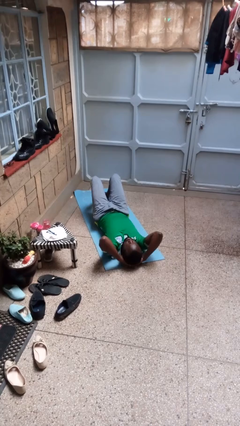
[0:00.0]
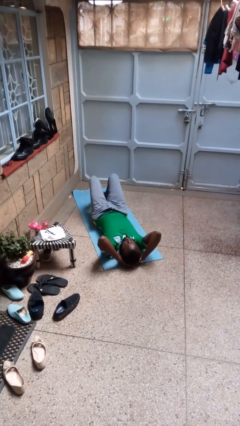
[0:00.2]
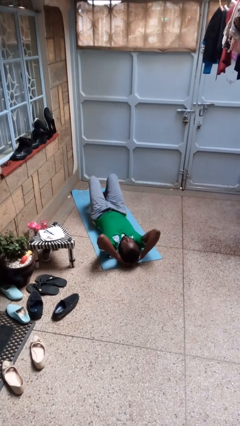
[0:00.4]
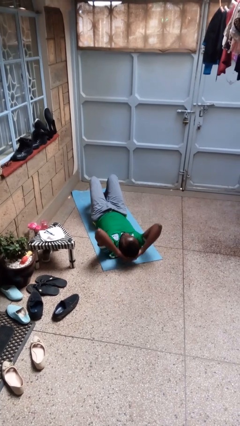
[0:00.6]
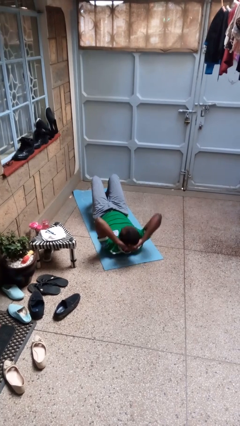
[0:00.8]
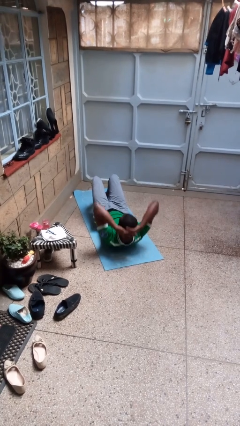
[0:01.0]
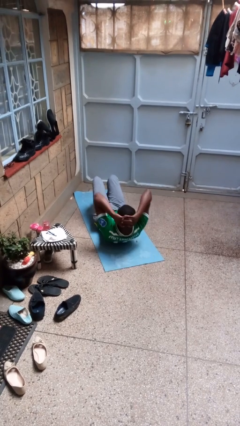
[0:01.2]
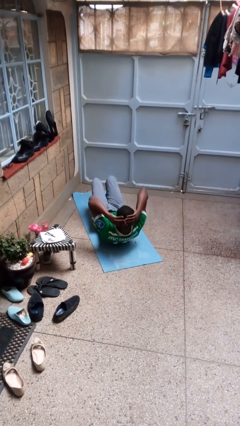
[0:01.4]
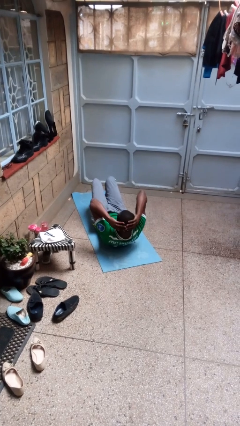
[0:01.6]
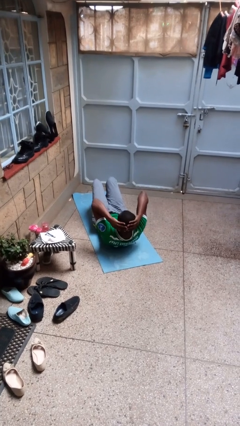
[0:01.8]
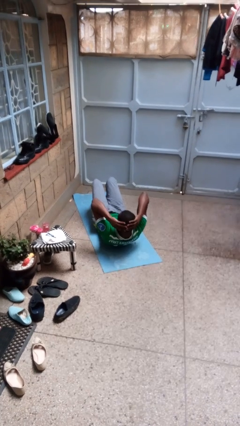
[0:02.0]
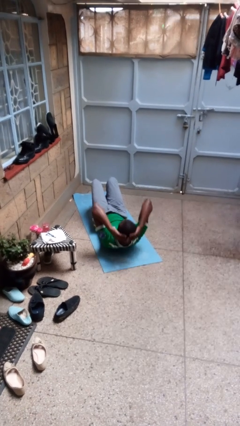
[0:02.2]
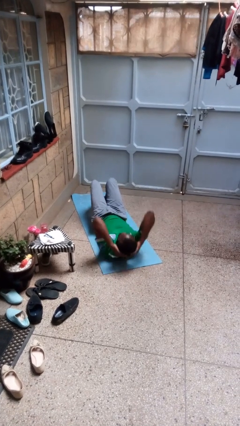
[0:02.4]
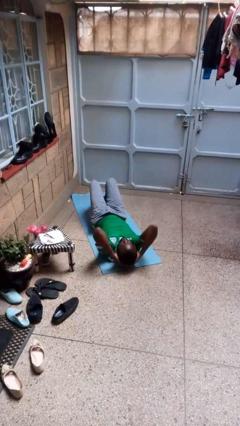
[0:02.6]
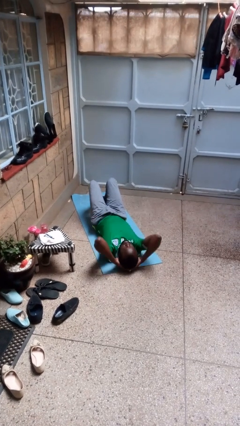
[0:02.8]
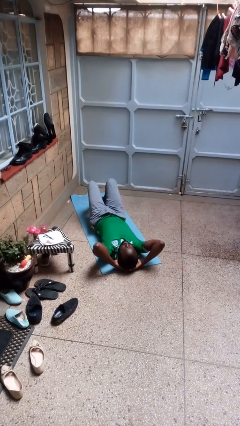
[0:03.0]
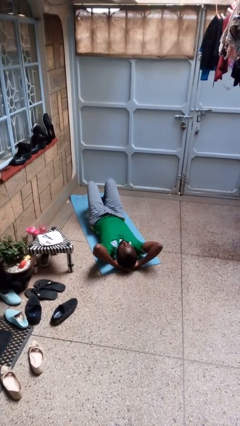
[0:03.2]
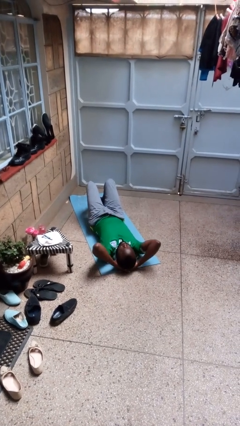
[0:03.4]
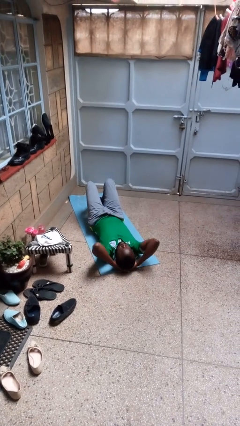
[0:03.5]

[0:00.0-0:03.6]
person exercises with situp

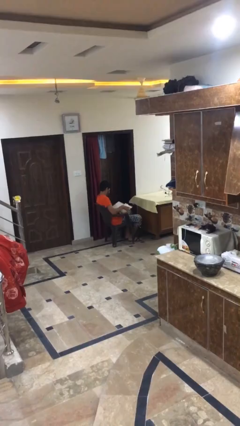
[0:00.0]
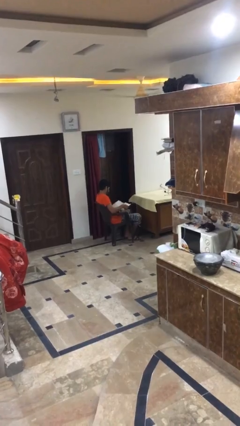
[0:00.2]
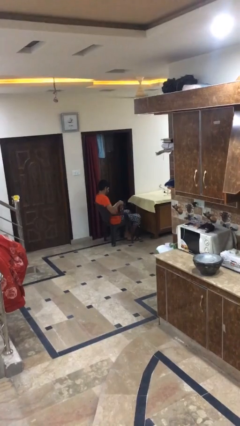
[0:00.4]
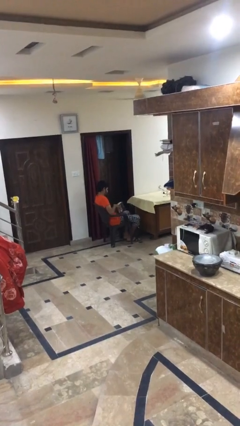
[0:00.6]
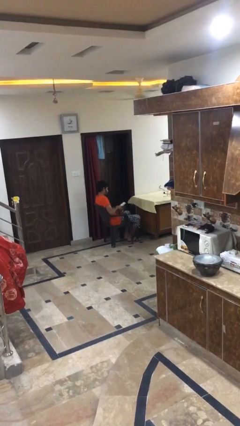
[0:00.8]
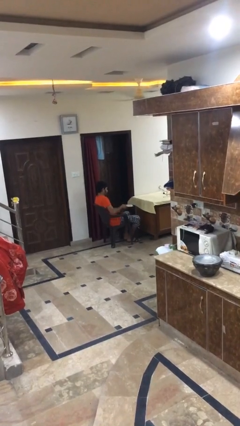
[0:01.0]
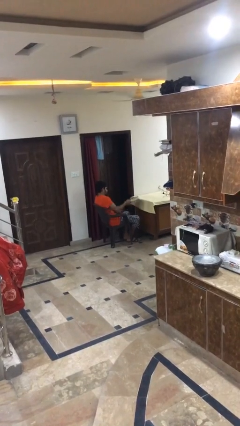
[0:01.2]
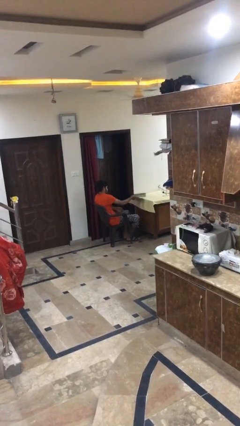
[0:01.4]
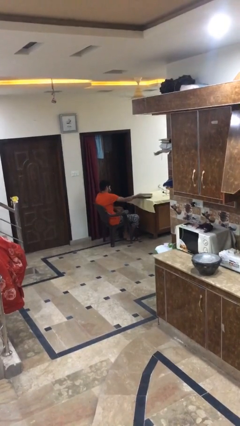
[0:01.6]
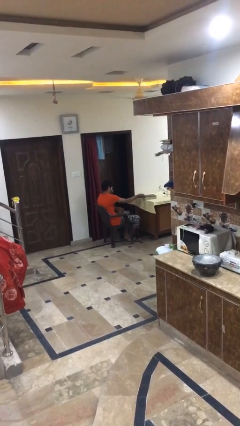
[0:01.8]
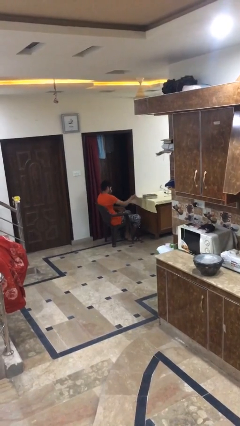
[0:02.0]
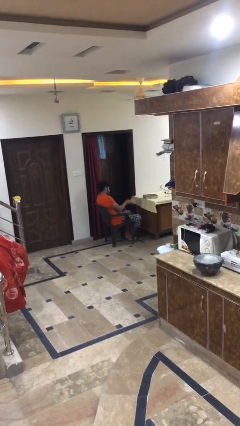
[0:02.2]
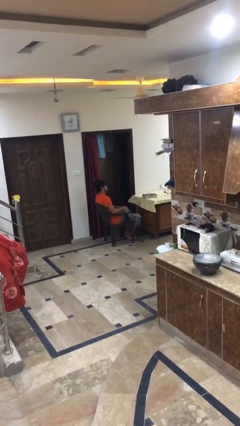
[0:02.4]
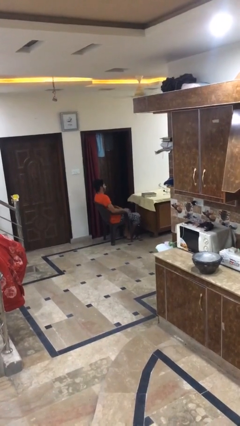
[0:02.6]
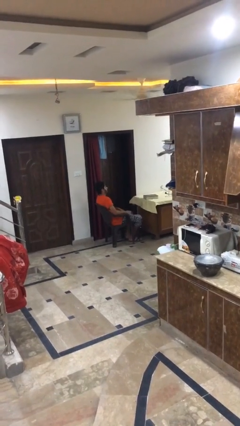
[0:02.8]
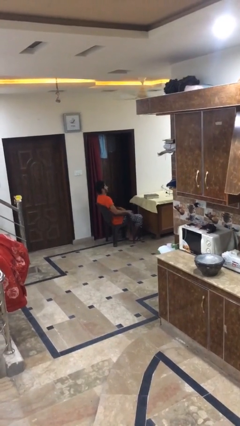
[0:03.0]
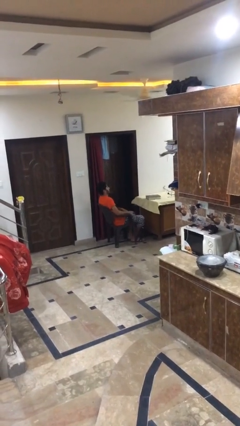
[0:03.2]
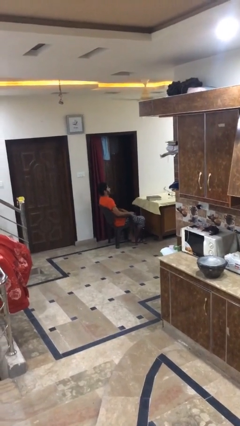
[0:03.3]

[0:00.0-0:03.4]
person puts down object on table

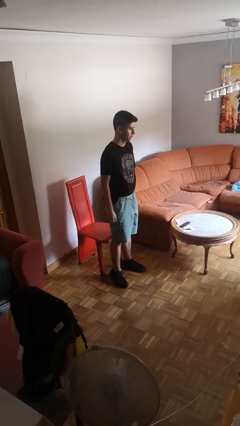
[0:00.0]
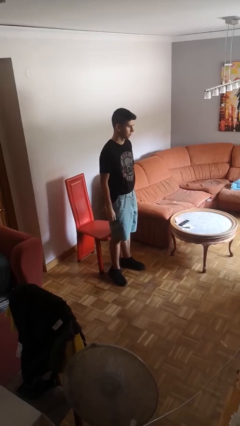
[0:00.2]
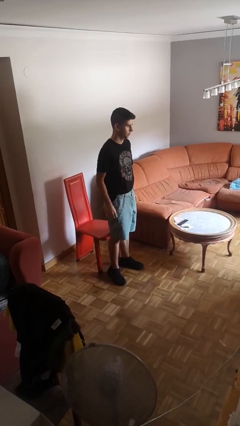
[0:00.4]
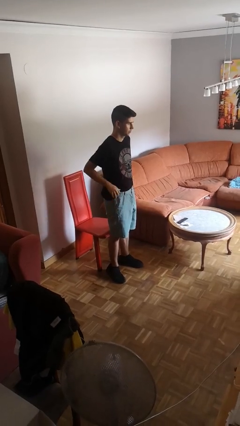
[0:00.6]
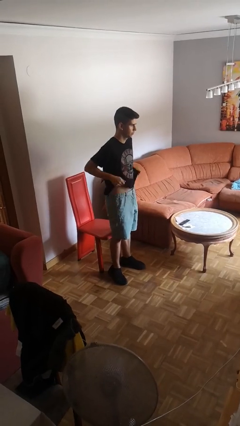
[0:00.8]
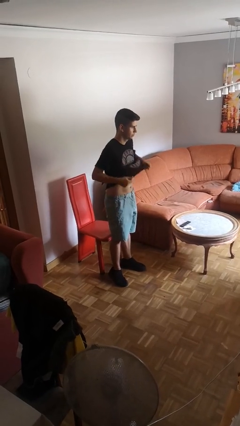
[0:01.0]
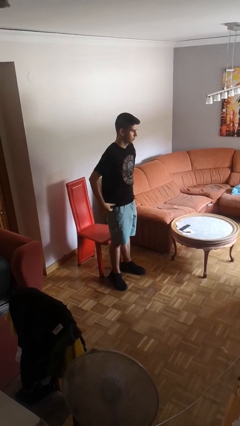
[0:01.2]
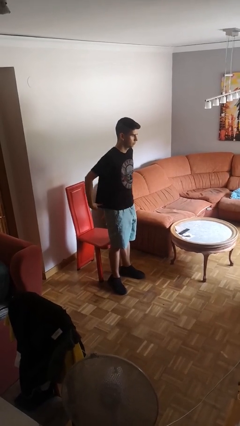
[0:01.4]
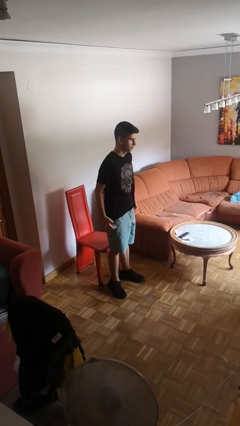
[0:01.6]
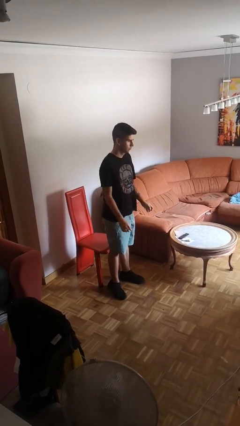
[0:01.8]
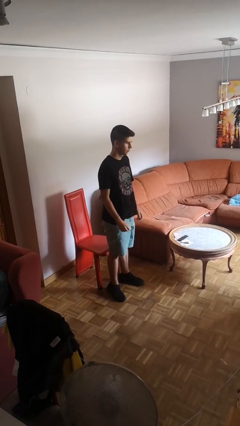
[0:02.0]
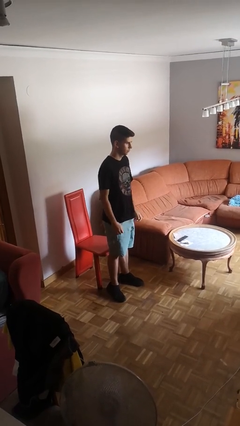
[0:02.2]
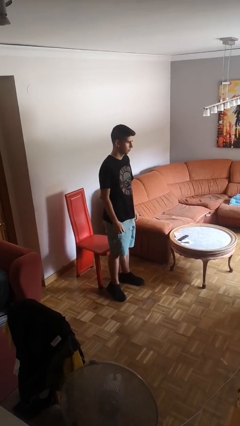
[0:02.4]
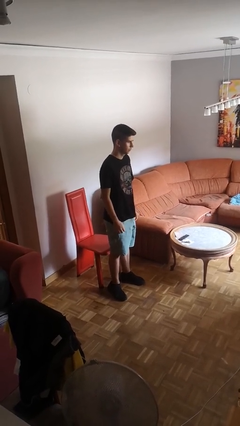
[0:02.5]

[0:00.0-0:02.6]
person untucks shirt

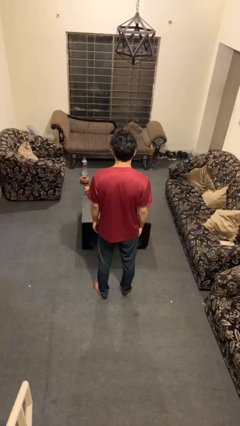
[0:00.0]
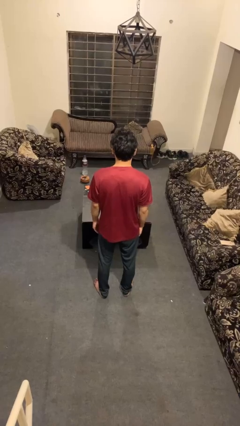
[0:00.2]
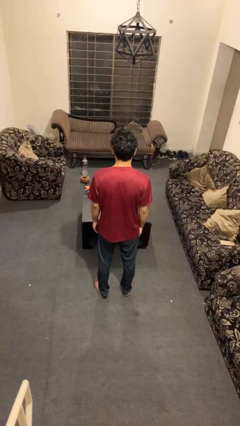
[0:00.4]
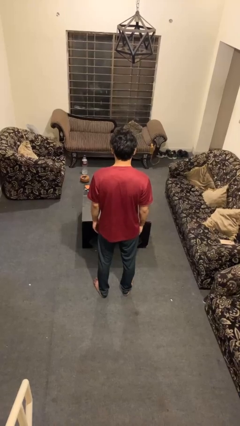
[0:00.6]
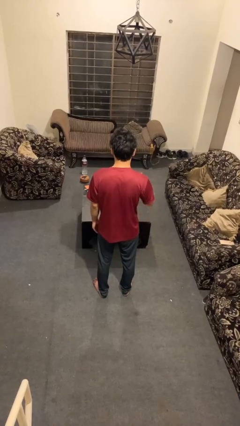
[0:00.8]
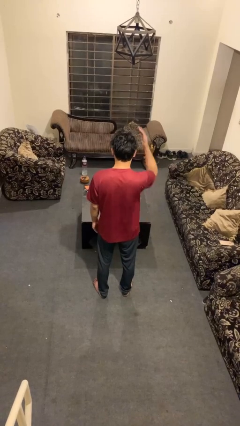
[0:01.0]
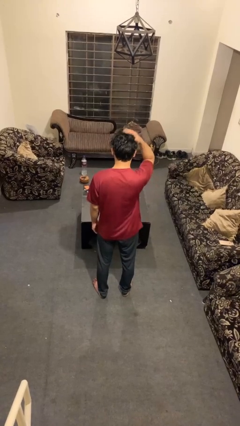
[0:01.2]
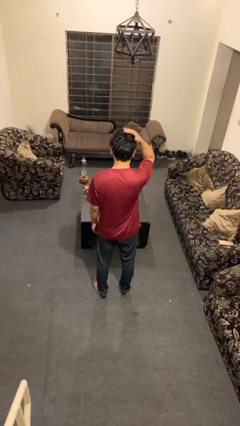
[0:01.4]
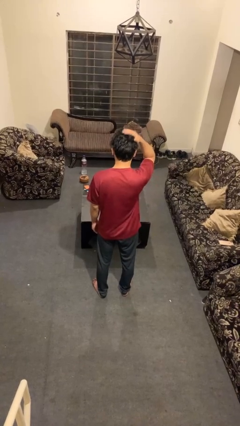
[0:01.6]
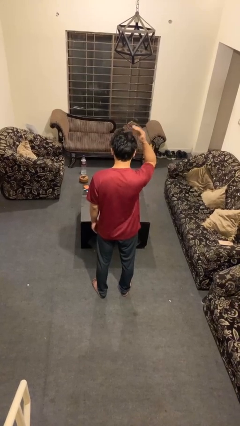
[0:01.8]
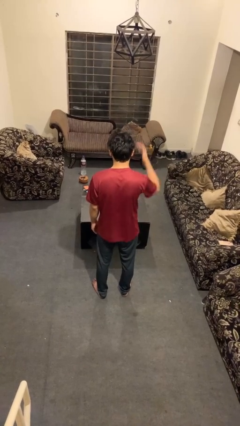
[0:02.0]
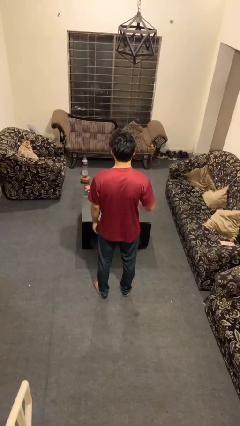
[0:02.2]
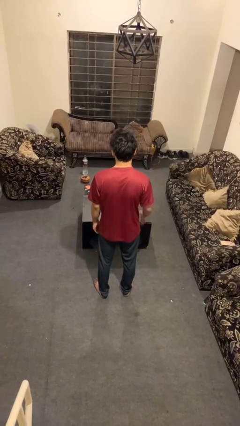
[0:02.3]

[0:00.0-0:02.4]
person pats head

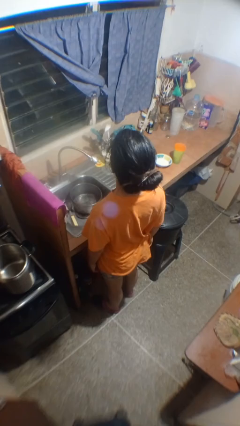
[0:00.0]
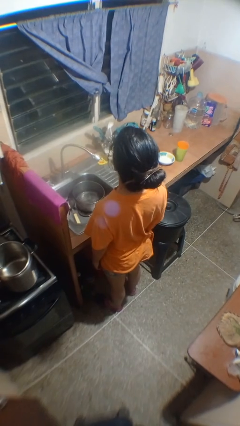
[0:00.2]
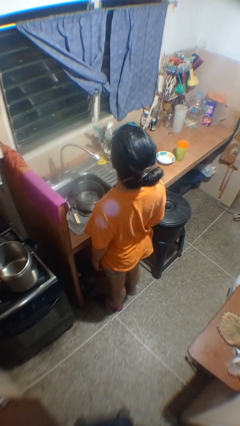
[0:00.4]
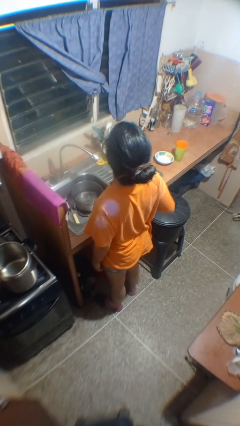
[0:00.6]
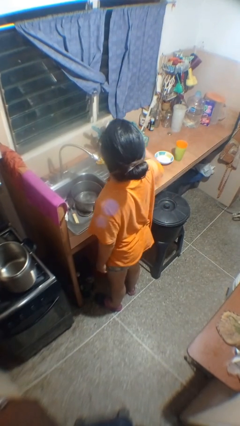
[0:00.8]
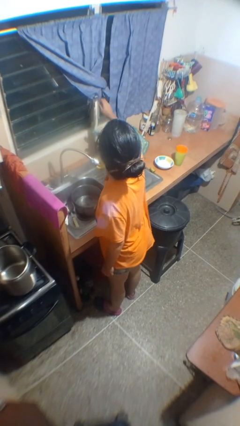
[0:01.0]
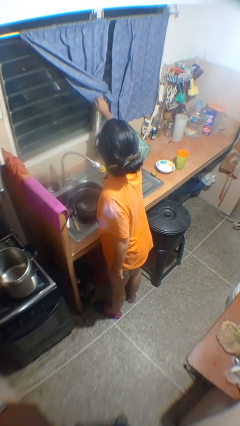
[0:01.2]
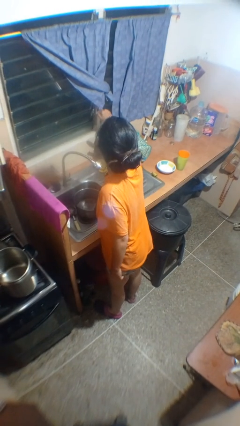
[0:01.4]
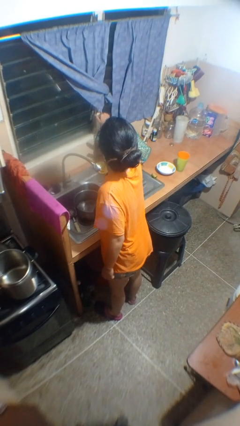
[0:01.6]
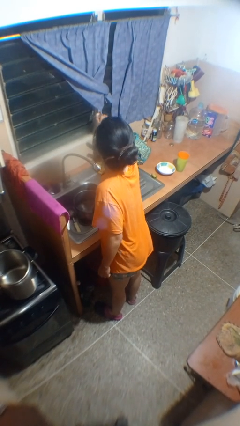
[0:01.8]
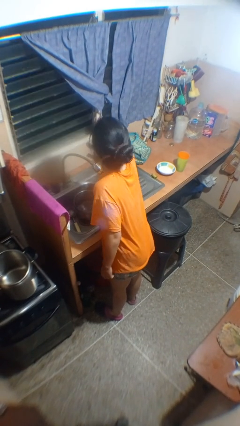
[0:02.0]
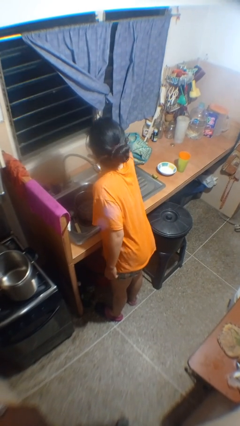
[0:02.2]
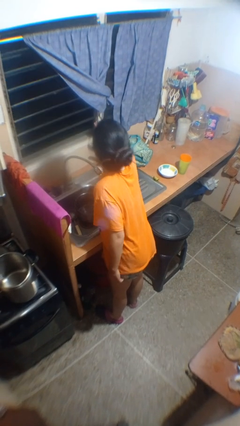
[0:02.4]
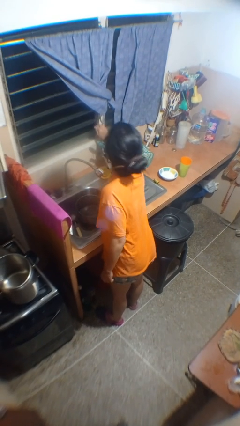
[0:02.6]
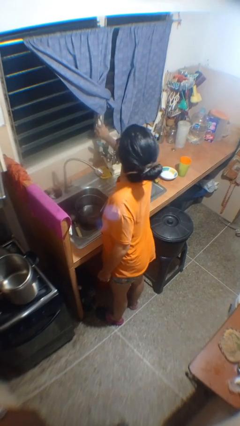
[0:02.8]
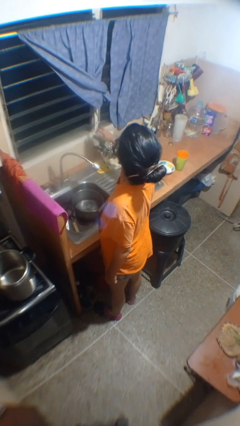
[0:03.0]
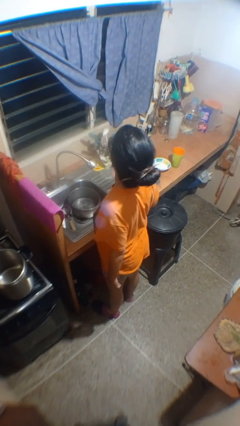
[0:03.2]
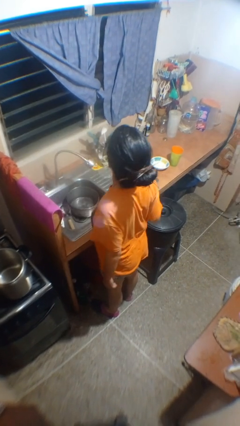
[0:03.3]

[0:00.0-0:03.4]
person opens home window

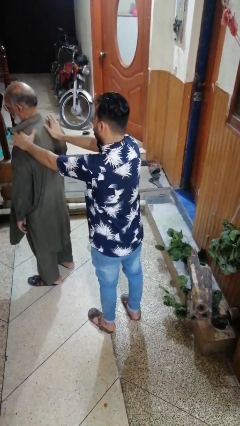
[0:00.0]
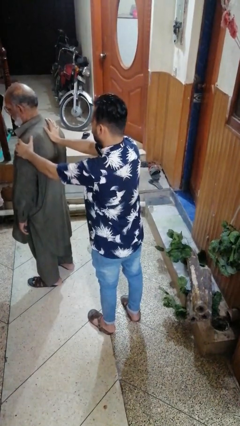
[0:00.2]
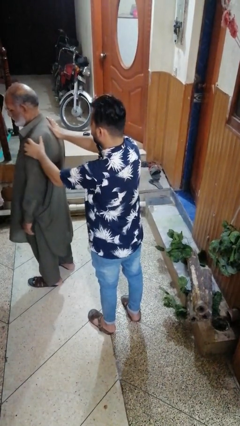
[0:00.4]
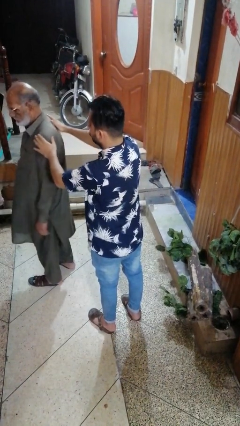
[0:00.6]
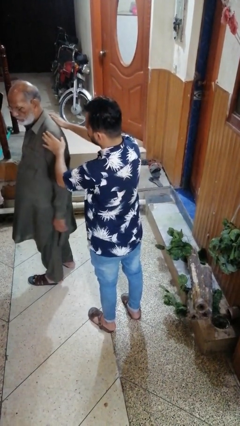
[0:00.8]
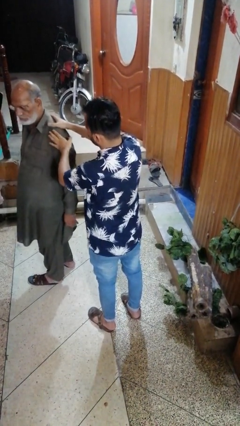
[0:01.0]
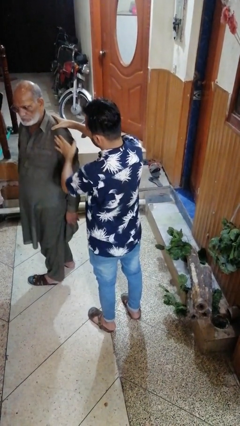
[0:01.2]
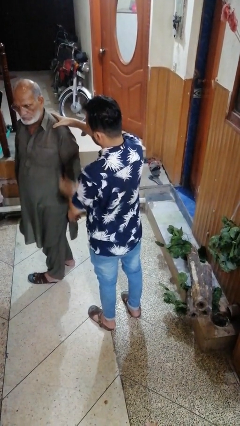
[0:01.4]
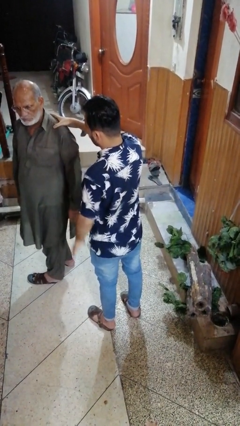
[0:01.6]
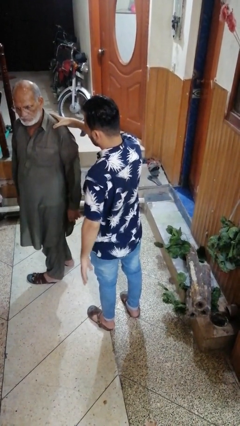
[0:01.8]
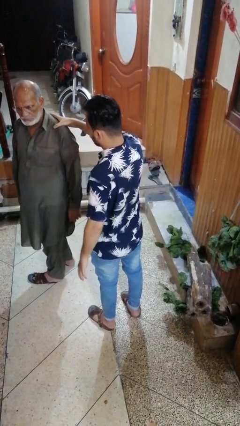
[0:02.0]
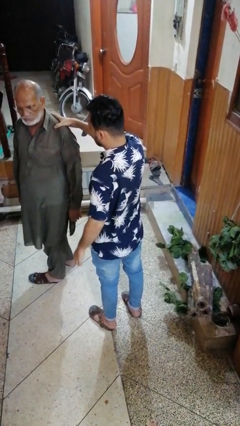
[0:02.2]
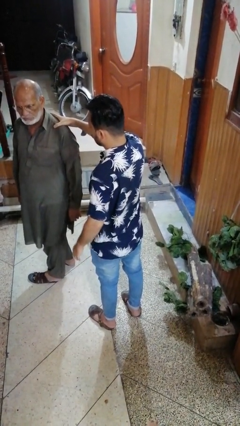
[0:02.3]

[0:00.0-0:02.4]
person spins person around

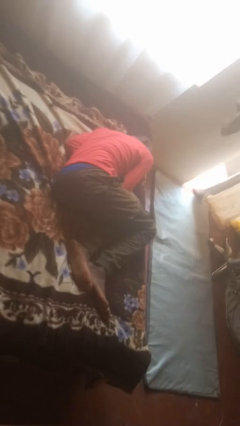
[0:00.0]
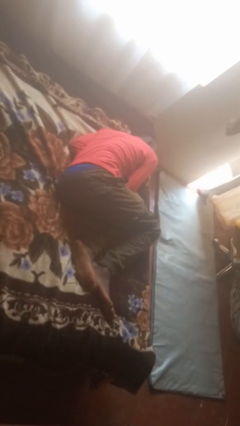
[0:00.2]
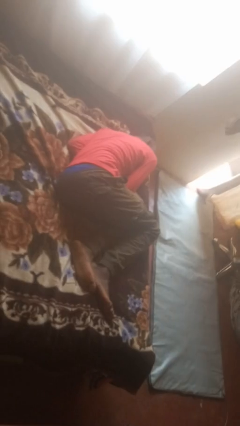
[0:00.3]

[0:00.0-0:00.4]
person lies down on bed
